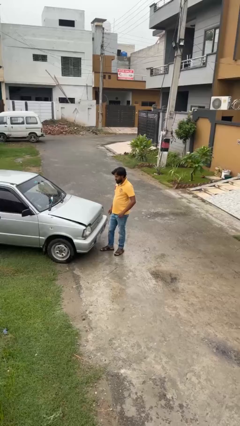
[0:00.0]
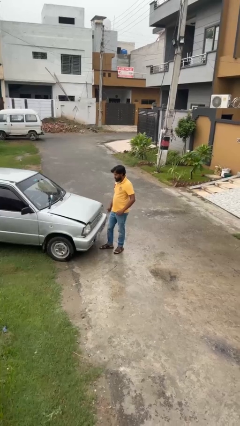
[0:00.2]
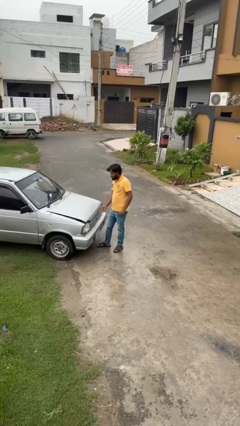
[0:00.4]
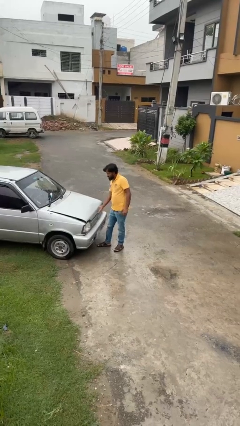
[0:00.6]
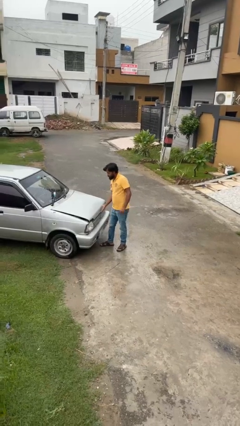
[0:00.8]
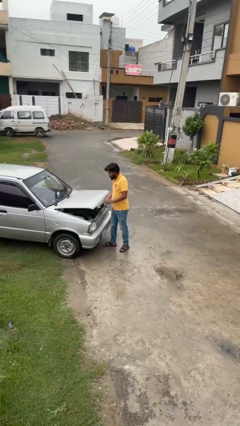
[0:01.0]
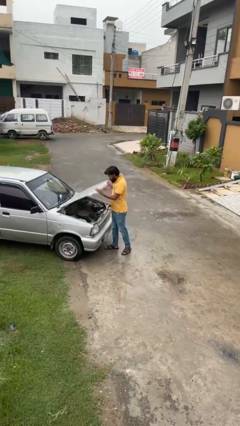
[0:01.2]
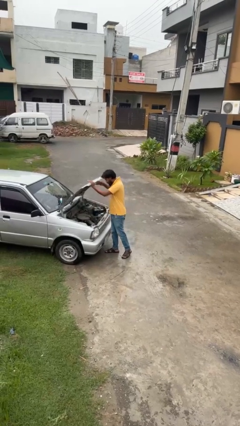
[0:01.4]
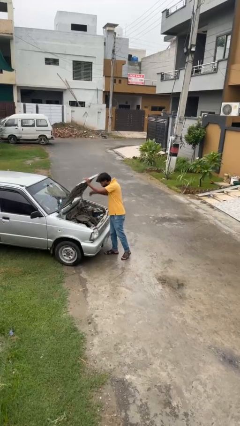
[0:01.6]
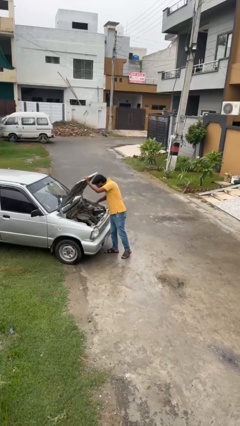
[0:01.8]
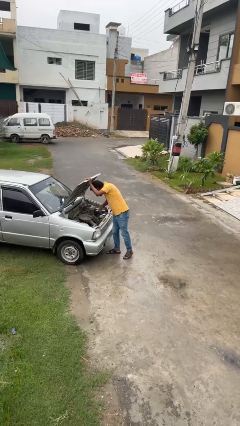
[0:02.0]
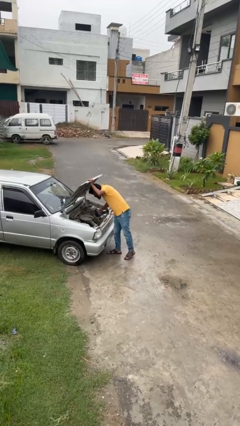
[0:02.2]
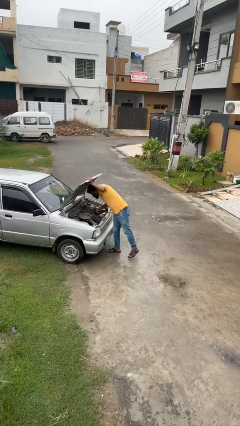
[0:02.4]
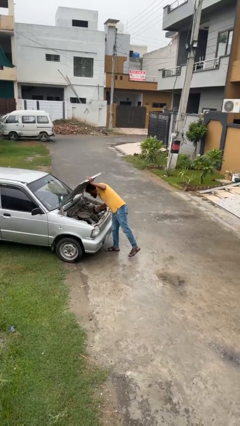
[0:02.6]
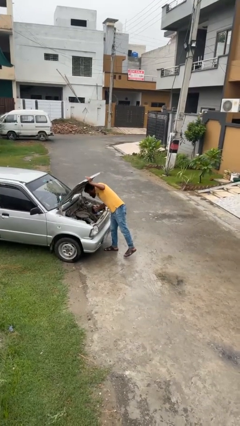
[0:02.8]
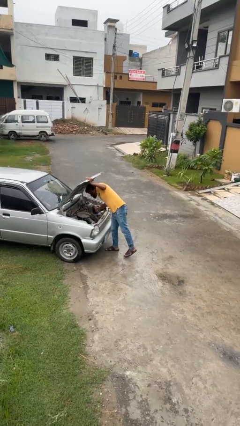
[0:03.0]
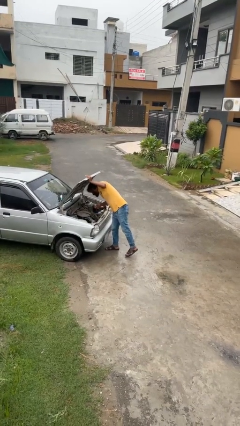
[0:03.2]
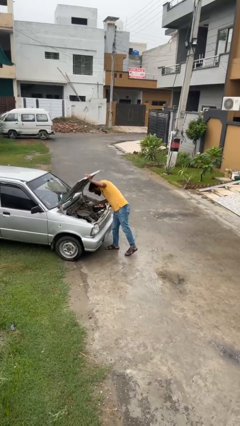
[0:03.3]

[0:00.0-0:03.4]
person opens car hood

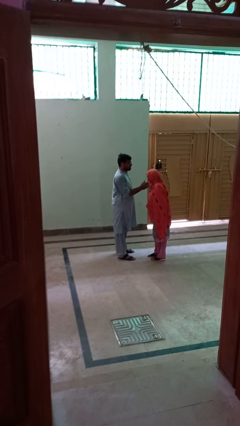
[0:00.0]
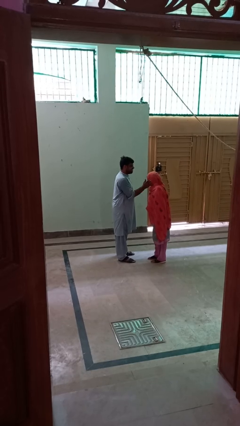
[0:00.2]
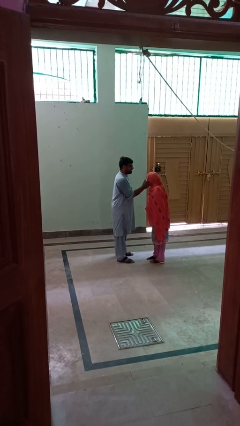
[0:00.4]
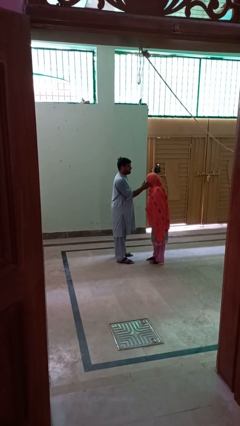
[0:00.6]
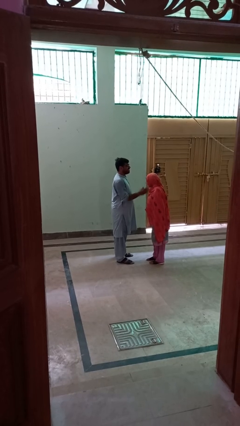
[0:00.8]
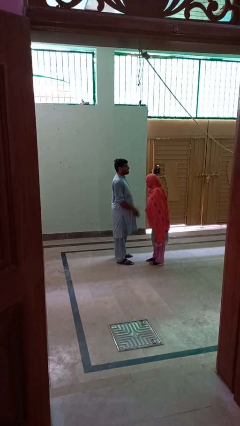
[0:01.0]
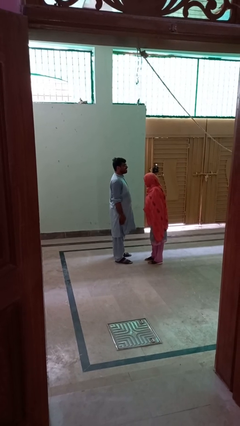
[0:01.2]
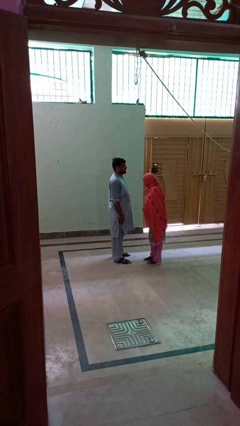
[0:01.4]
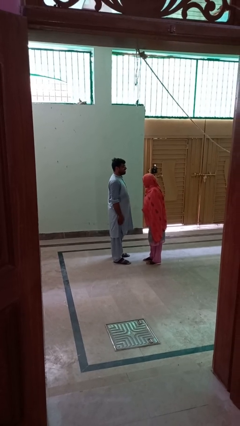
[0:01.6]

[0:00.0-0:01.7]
person touches face of person

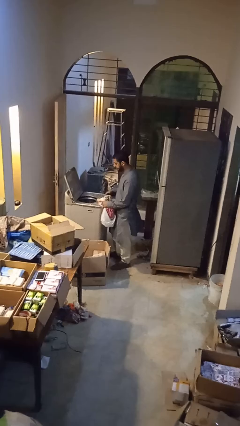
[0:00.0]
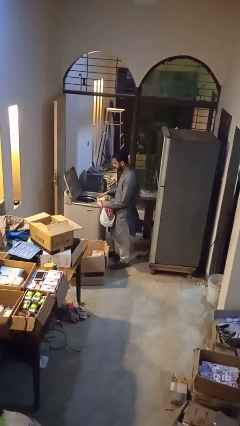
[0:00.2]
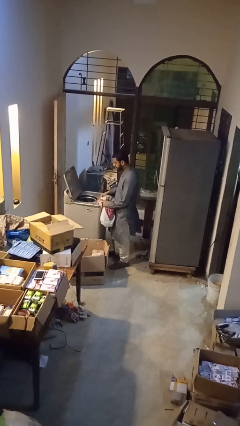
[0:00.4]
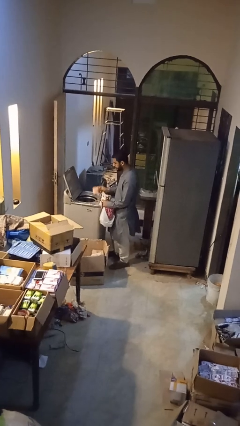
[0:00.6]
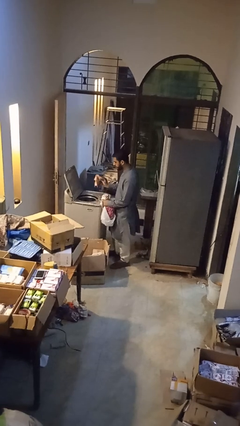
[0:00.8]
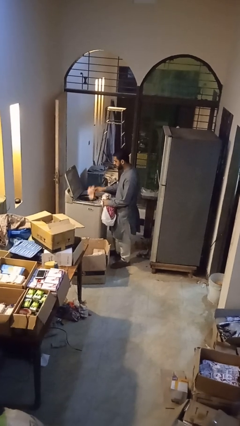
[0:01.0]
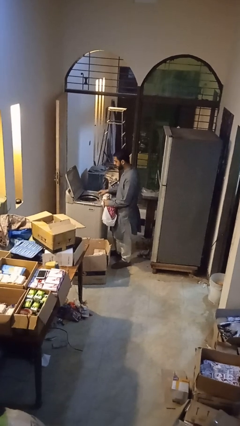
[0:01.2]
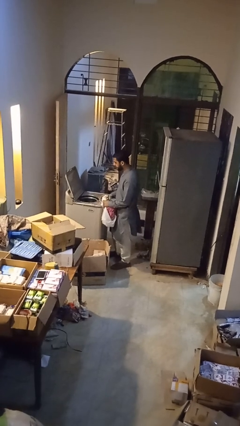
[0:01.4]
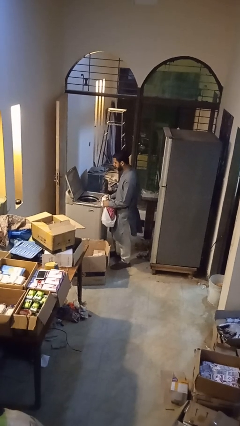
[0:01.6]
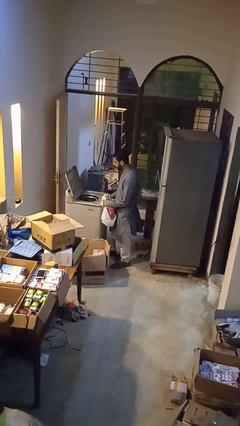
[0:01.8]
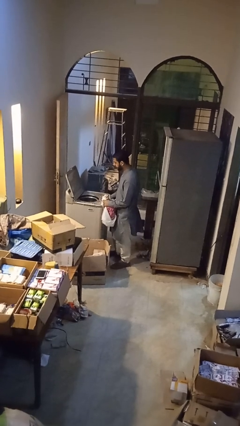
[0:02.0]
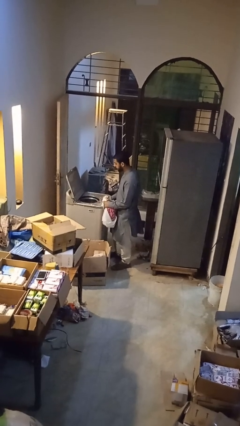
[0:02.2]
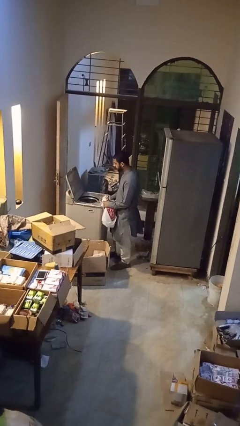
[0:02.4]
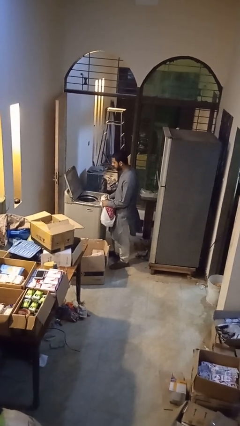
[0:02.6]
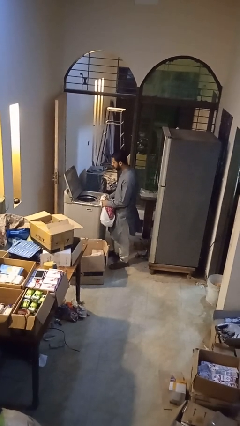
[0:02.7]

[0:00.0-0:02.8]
person loads dryer

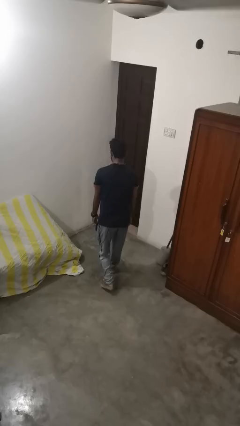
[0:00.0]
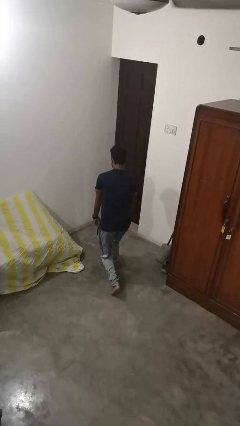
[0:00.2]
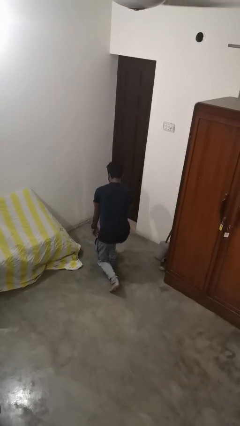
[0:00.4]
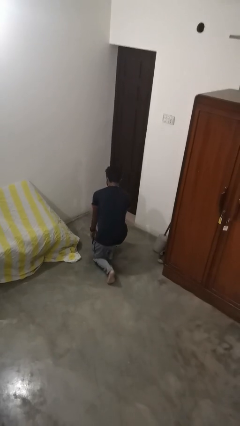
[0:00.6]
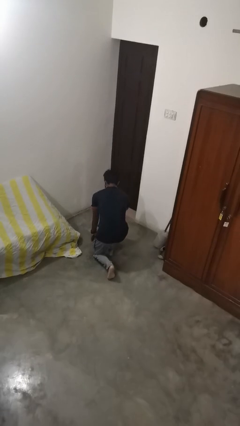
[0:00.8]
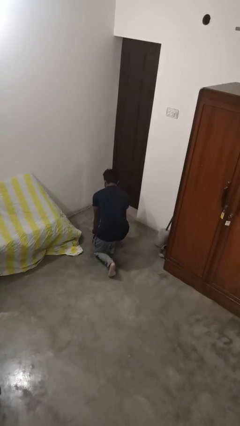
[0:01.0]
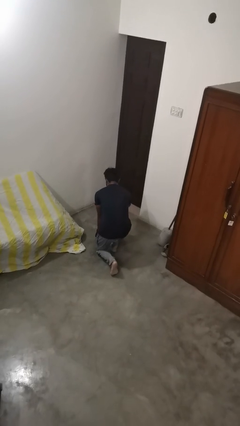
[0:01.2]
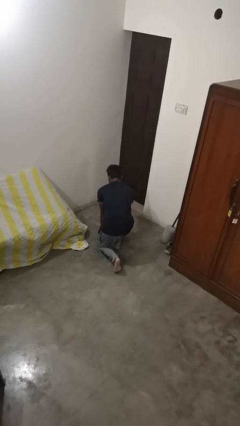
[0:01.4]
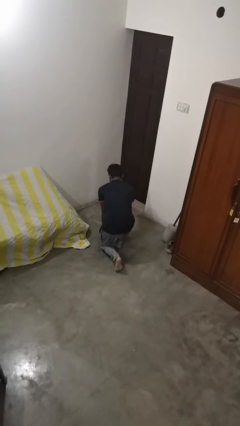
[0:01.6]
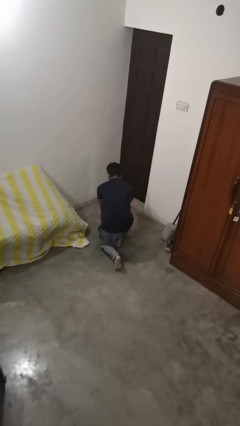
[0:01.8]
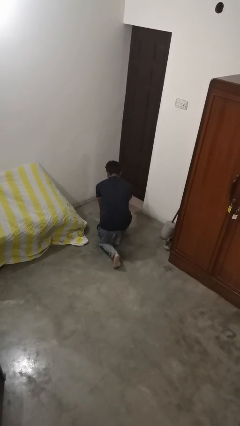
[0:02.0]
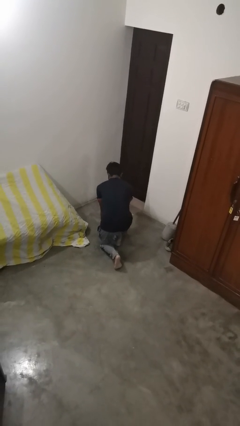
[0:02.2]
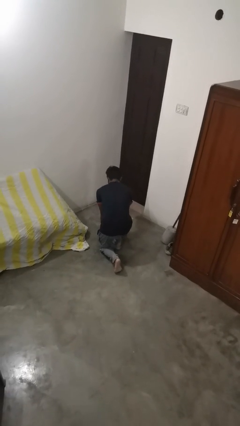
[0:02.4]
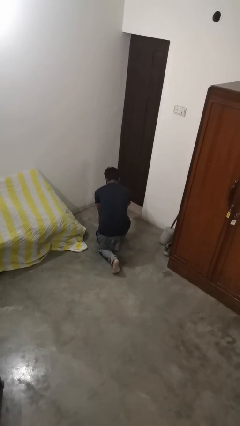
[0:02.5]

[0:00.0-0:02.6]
person kneels

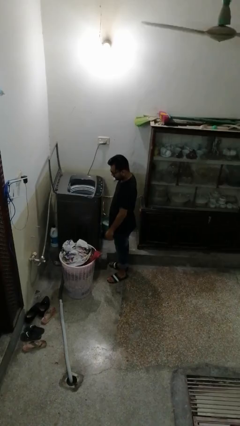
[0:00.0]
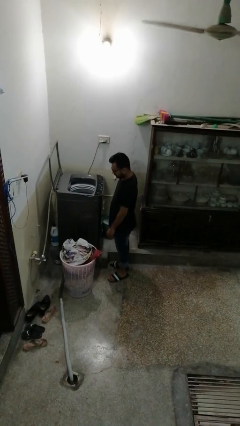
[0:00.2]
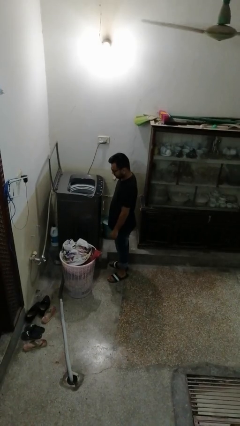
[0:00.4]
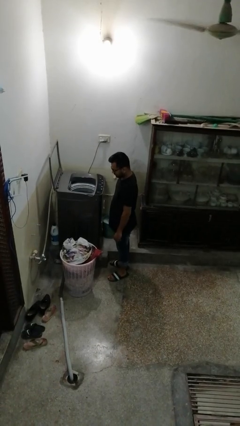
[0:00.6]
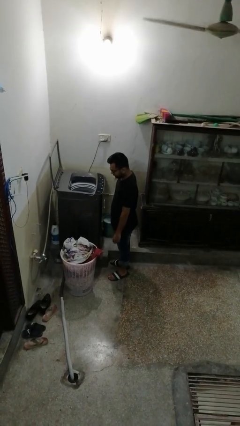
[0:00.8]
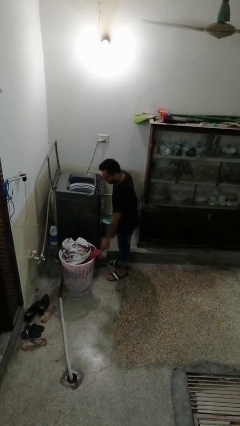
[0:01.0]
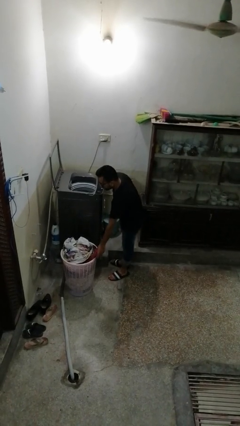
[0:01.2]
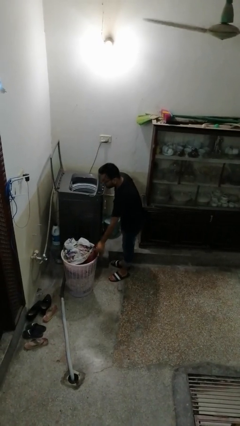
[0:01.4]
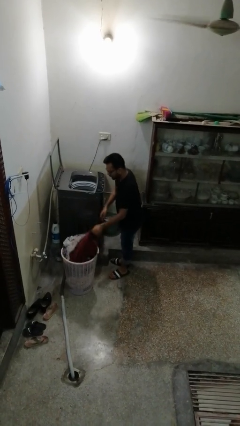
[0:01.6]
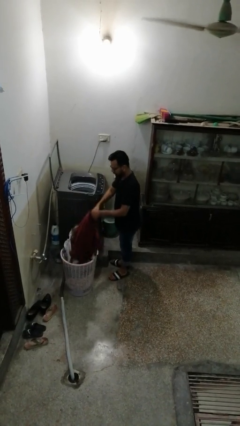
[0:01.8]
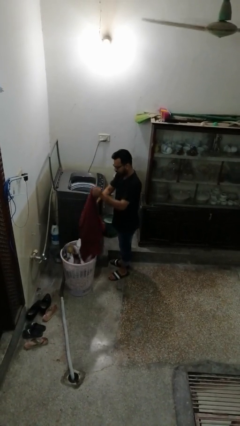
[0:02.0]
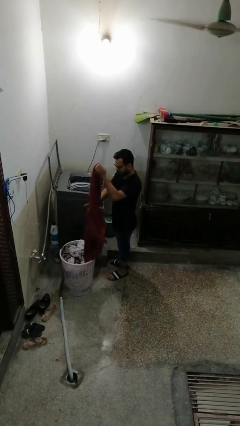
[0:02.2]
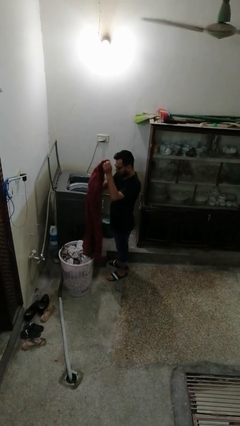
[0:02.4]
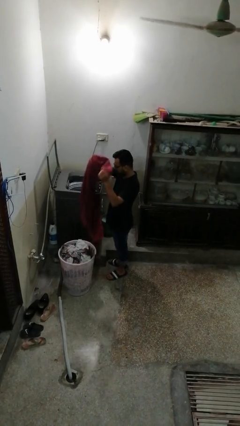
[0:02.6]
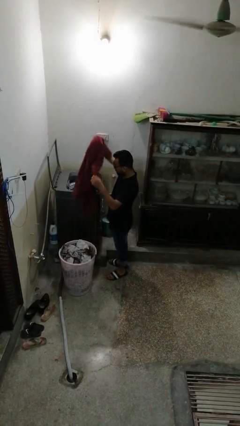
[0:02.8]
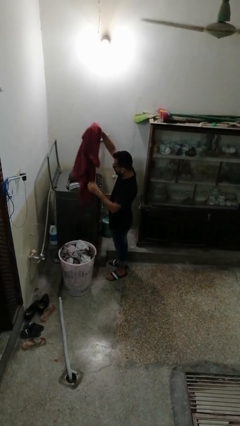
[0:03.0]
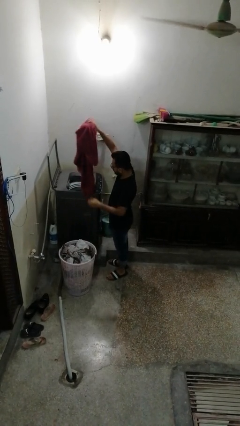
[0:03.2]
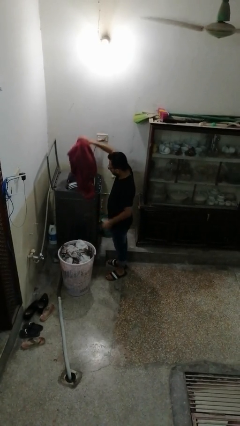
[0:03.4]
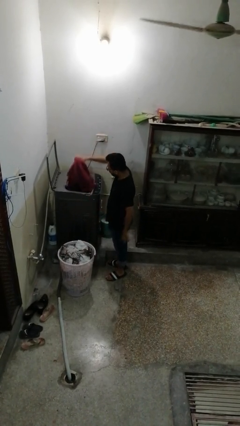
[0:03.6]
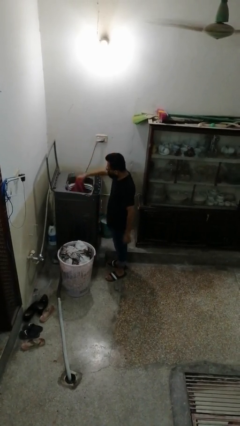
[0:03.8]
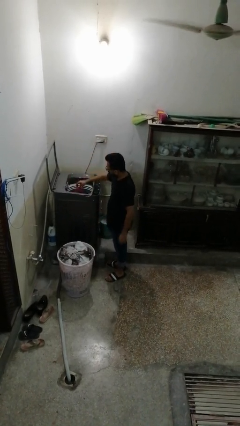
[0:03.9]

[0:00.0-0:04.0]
person loads clotheswasher

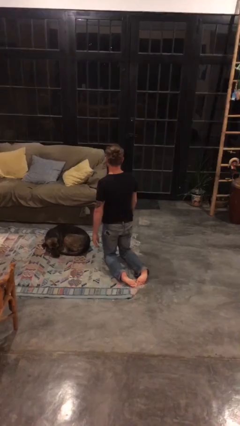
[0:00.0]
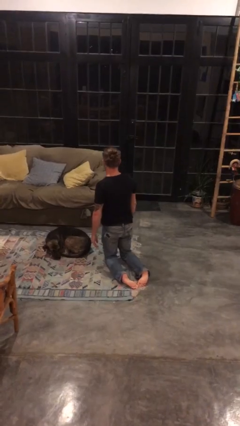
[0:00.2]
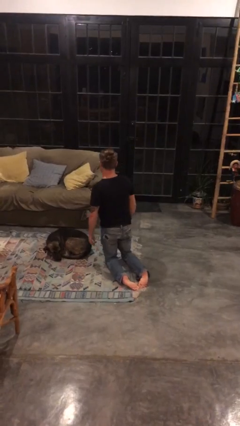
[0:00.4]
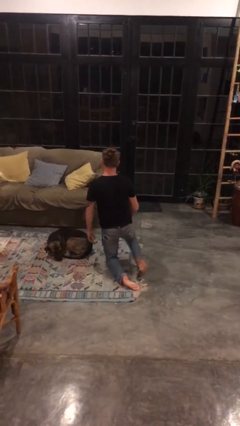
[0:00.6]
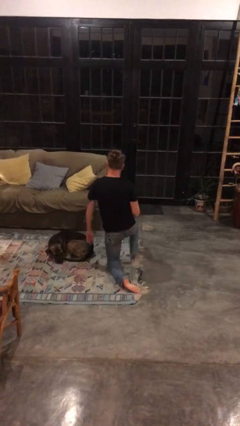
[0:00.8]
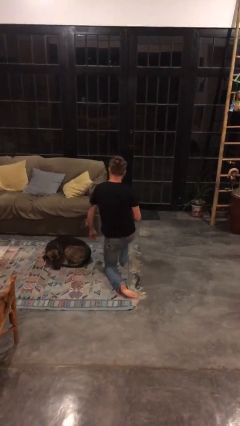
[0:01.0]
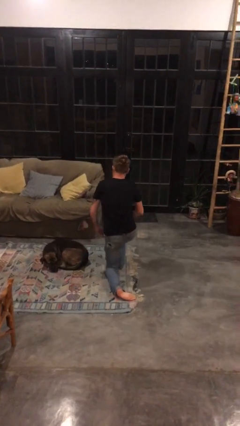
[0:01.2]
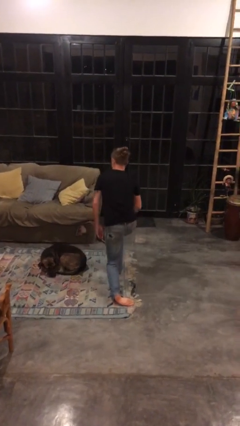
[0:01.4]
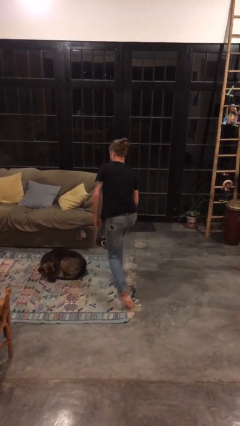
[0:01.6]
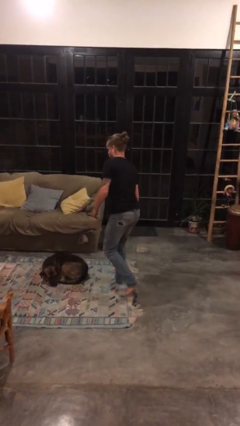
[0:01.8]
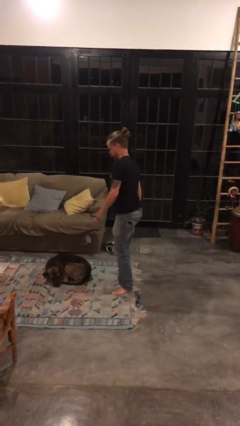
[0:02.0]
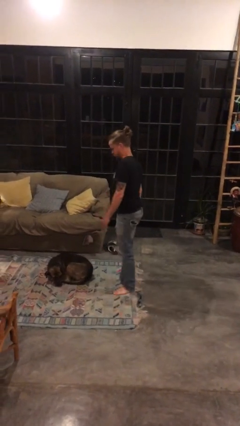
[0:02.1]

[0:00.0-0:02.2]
person stands up from floor

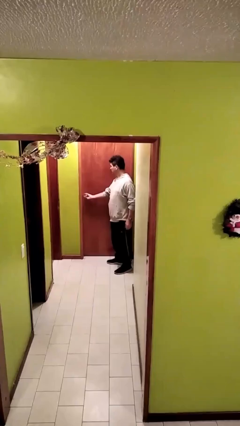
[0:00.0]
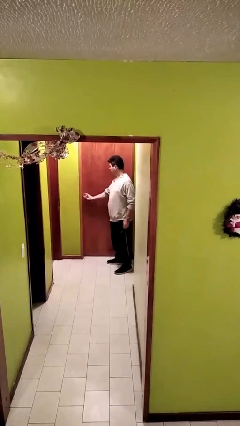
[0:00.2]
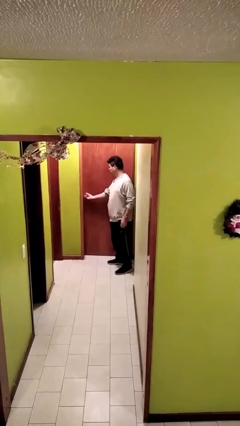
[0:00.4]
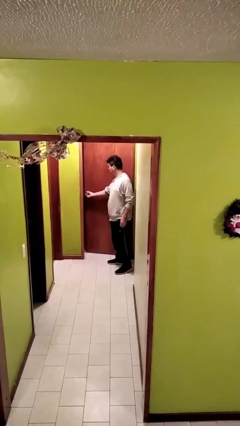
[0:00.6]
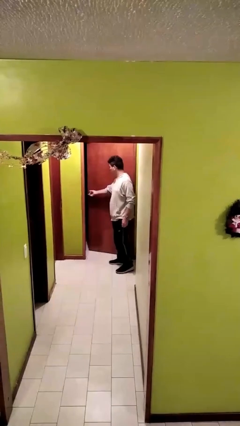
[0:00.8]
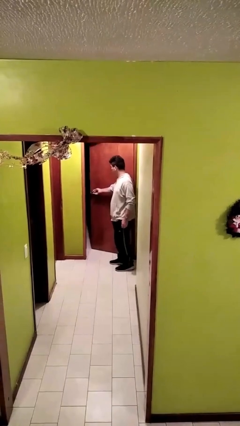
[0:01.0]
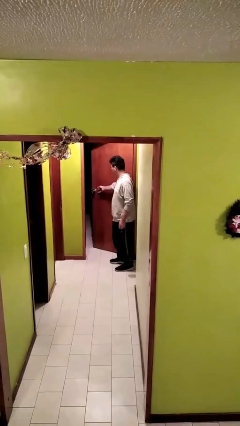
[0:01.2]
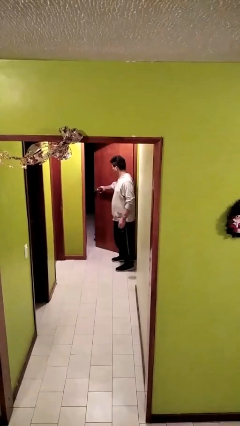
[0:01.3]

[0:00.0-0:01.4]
person opens facility door
